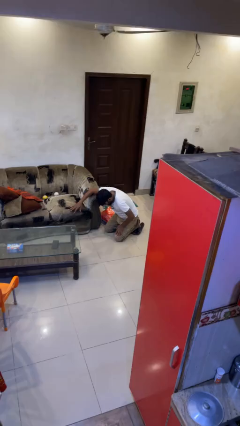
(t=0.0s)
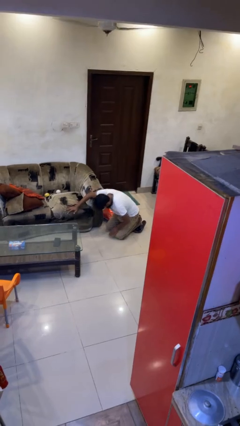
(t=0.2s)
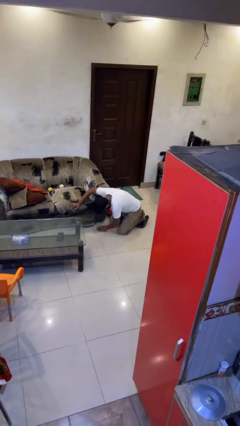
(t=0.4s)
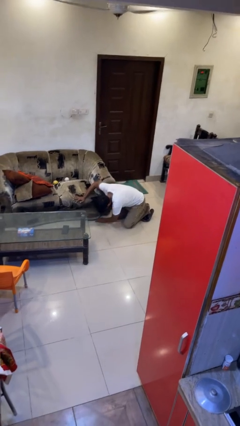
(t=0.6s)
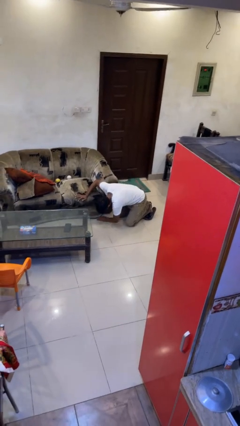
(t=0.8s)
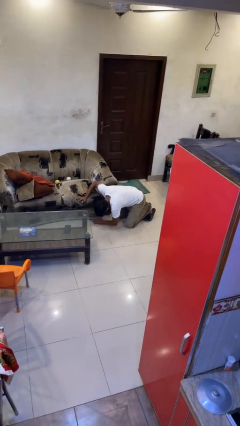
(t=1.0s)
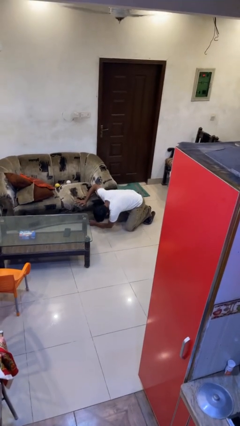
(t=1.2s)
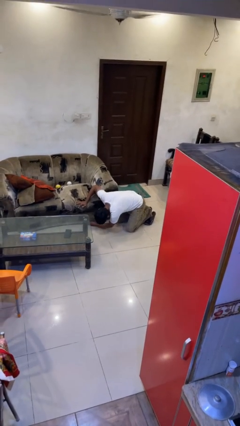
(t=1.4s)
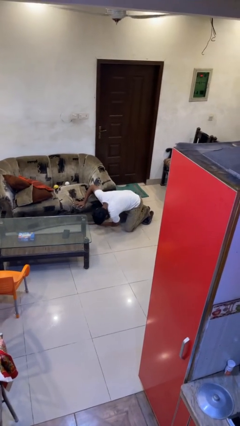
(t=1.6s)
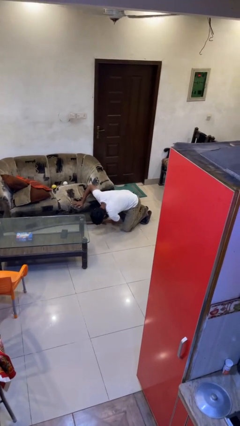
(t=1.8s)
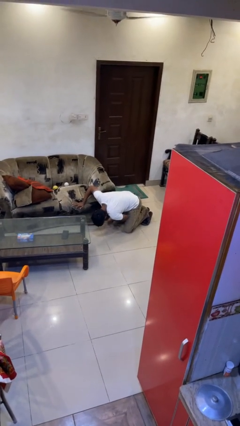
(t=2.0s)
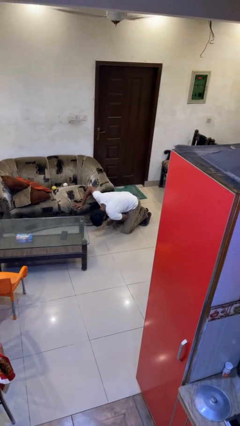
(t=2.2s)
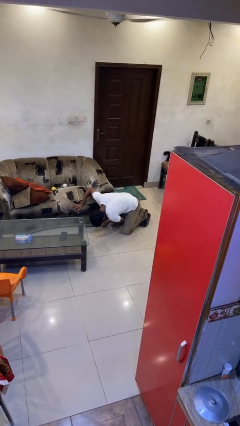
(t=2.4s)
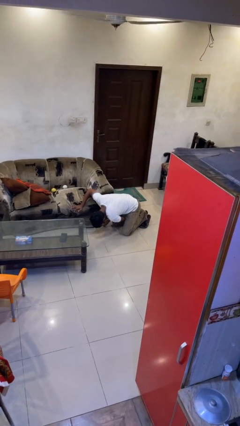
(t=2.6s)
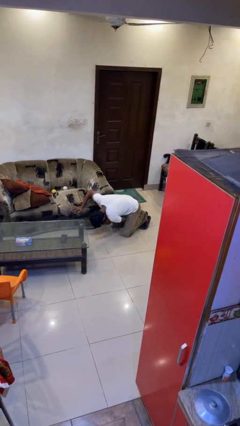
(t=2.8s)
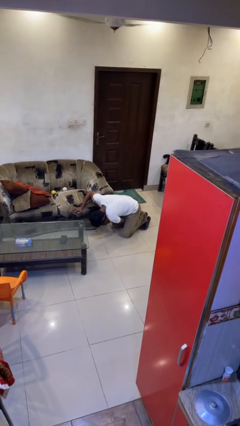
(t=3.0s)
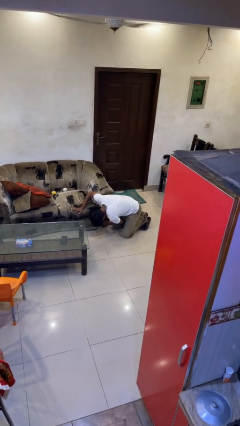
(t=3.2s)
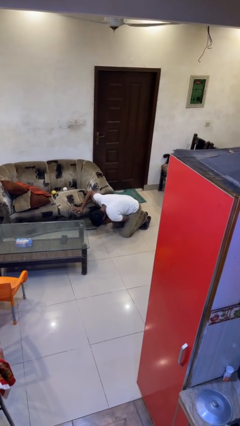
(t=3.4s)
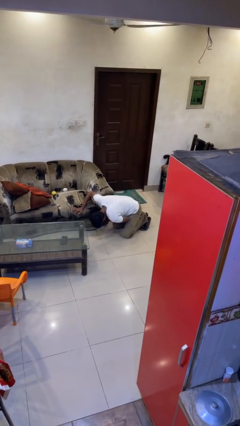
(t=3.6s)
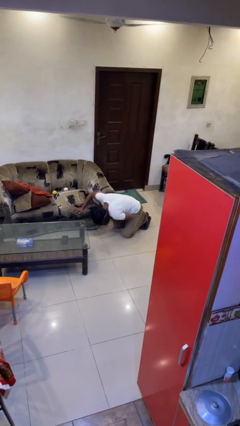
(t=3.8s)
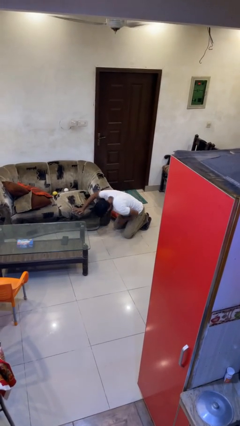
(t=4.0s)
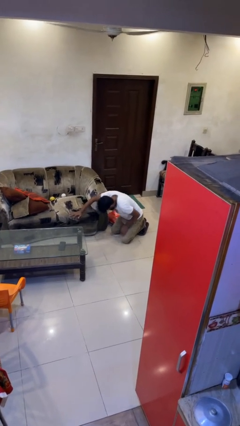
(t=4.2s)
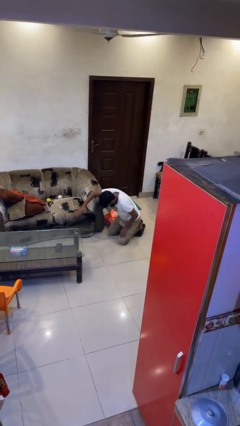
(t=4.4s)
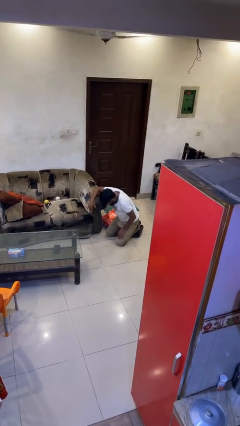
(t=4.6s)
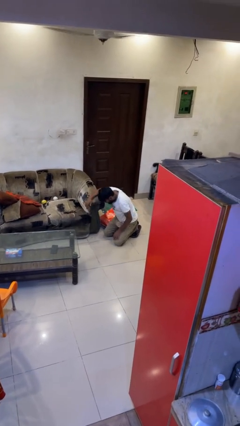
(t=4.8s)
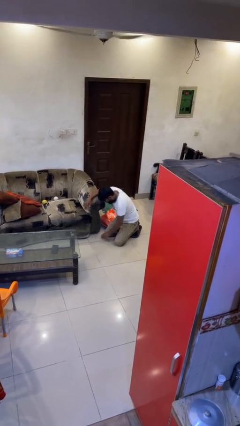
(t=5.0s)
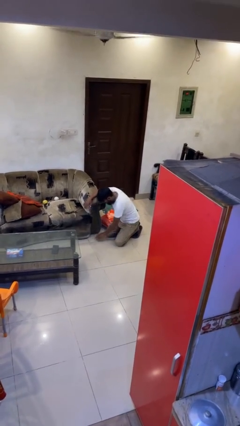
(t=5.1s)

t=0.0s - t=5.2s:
person searches under couch

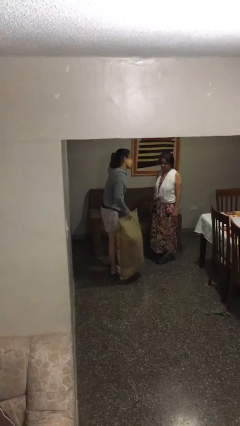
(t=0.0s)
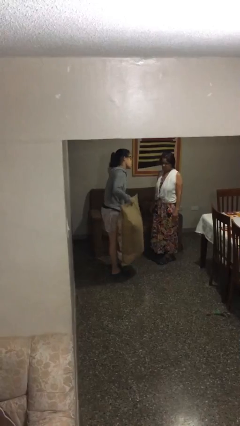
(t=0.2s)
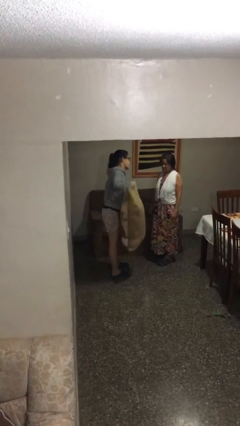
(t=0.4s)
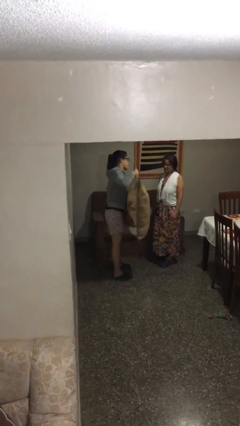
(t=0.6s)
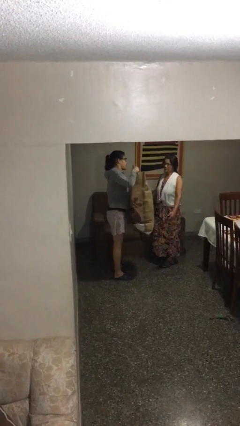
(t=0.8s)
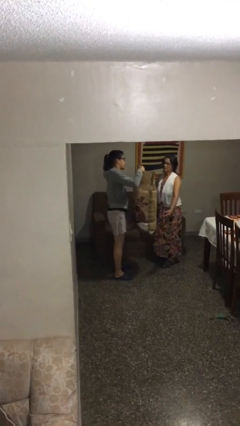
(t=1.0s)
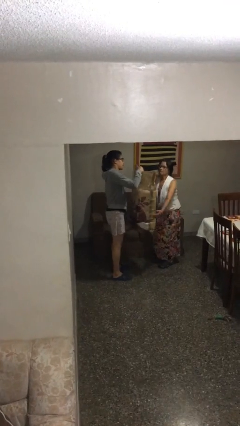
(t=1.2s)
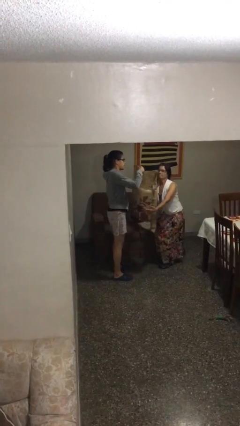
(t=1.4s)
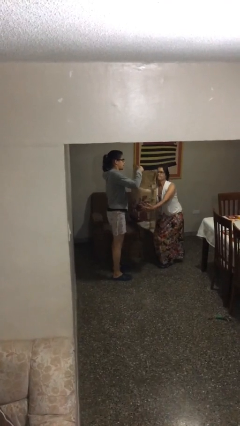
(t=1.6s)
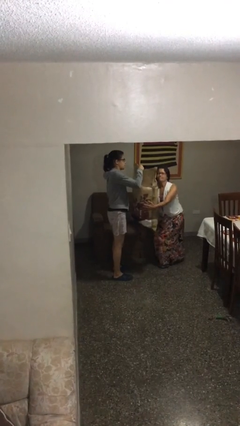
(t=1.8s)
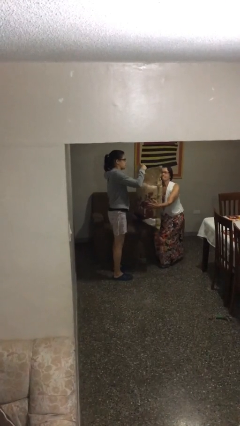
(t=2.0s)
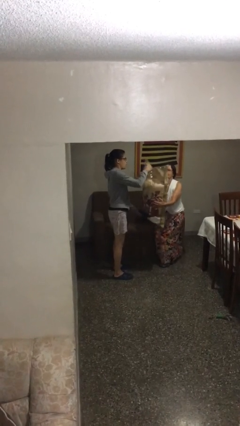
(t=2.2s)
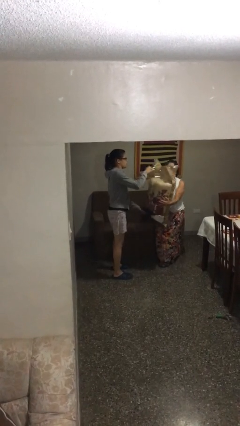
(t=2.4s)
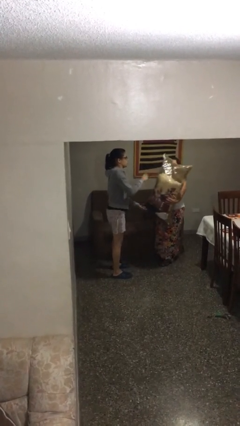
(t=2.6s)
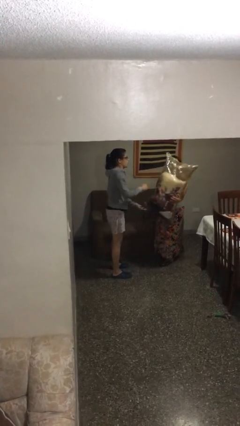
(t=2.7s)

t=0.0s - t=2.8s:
person transfers object to person

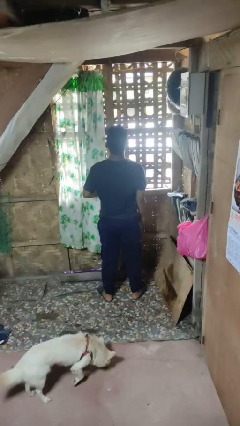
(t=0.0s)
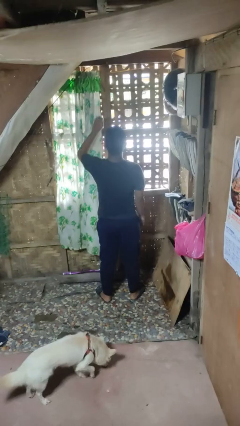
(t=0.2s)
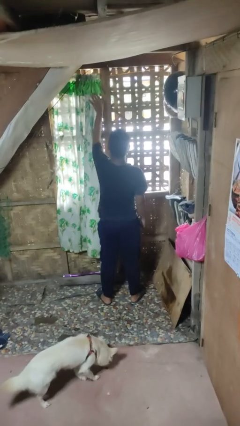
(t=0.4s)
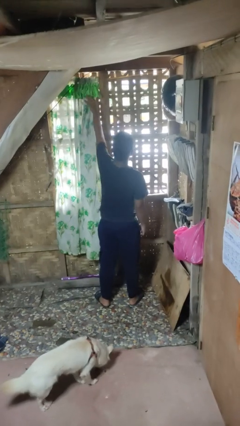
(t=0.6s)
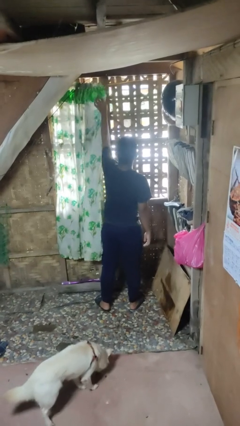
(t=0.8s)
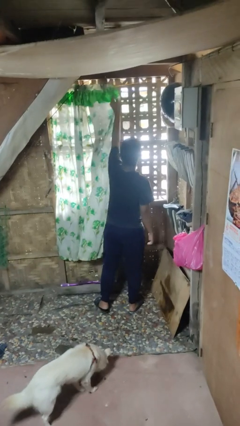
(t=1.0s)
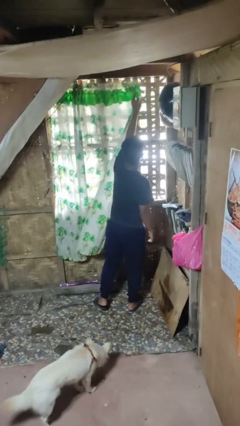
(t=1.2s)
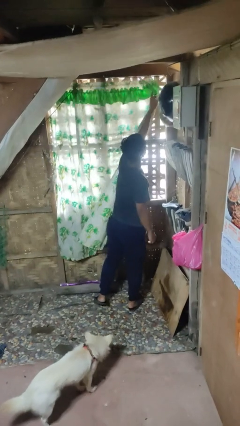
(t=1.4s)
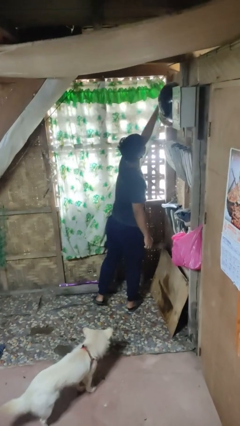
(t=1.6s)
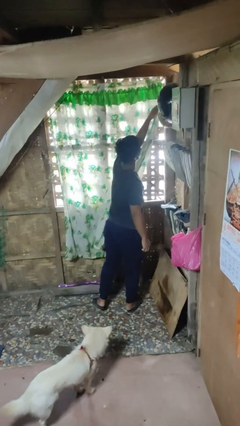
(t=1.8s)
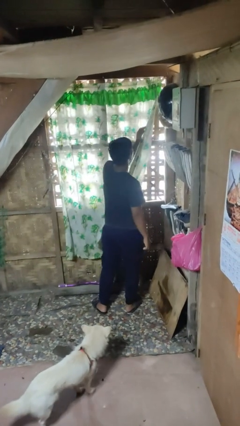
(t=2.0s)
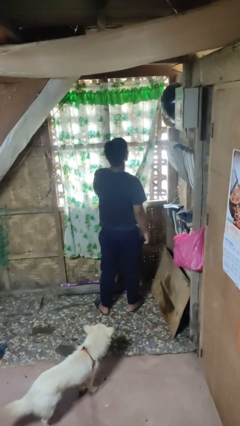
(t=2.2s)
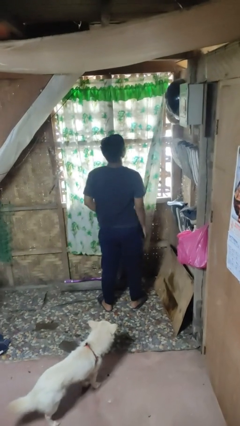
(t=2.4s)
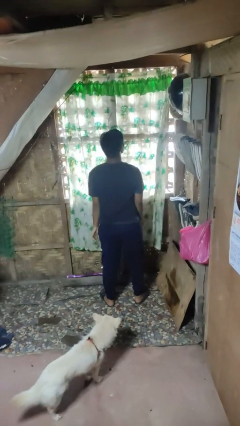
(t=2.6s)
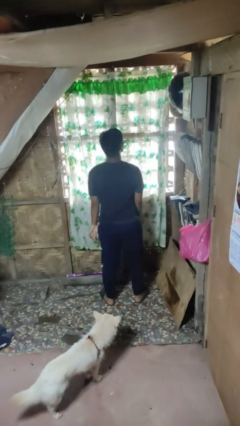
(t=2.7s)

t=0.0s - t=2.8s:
person closes curtains

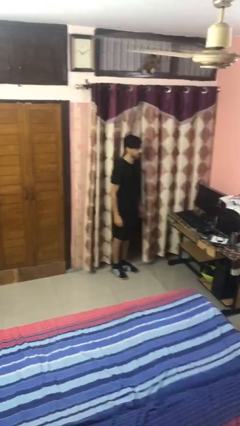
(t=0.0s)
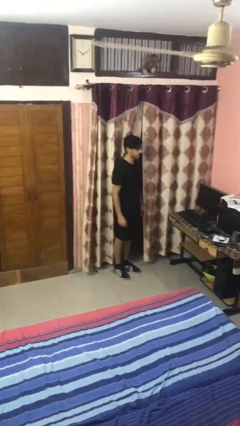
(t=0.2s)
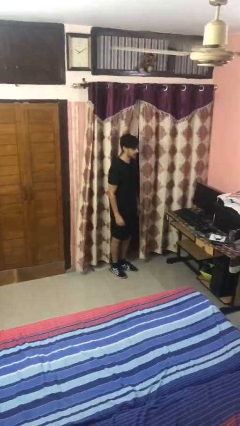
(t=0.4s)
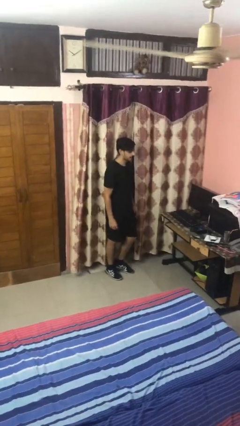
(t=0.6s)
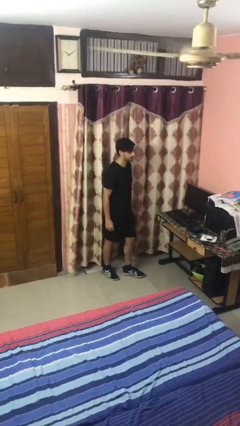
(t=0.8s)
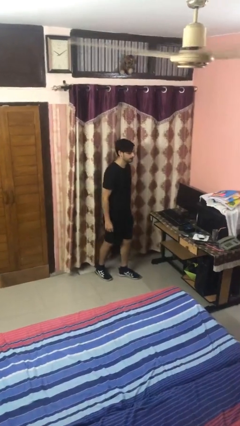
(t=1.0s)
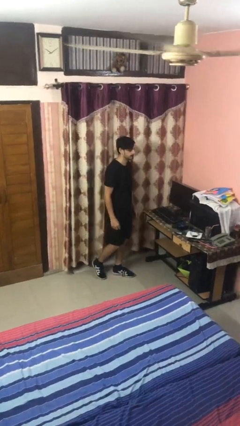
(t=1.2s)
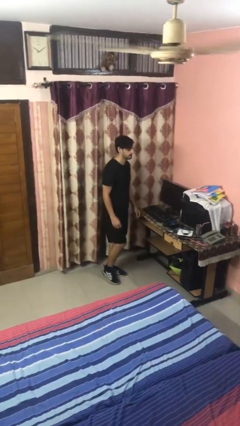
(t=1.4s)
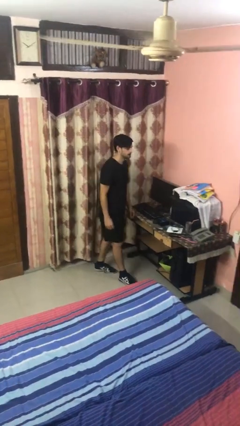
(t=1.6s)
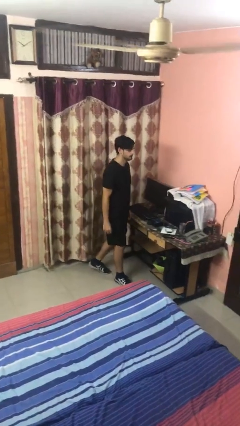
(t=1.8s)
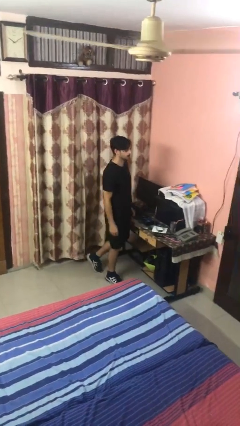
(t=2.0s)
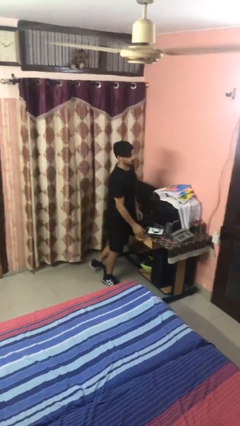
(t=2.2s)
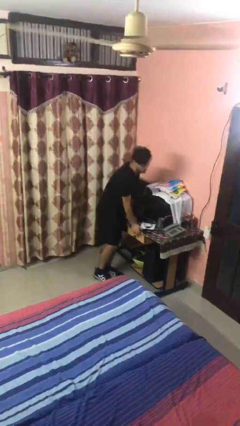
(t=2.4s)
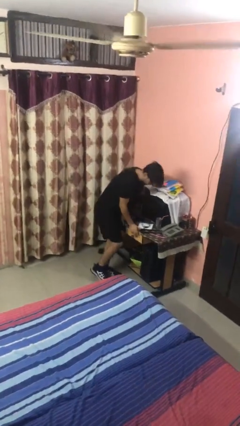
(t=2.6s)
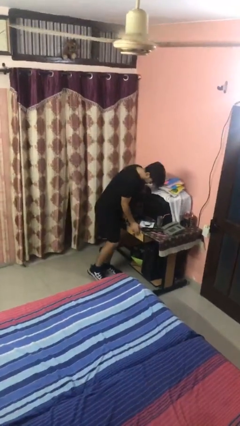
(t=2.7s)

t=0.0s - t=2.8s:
person bumps into table

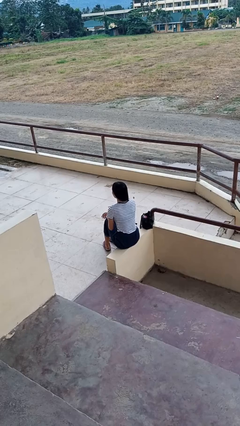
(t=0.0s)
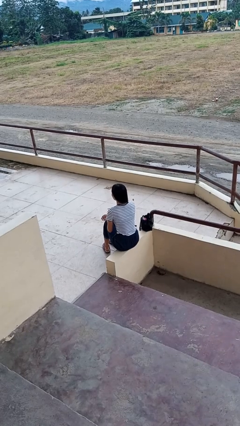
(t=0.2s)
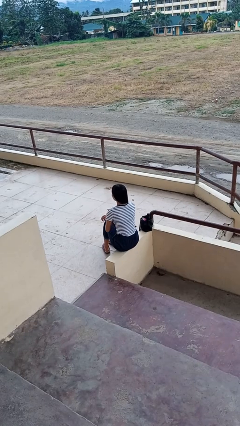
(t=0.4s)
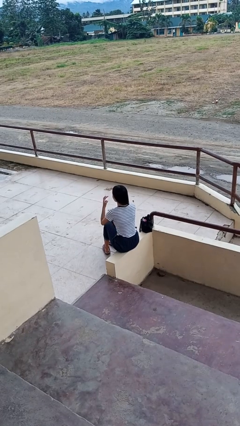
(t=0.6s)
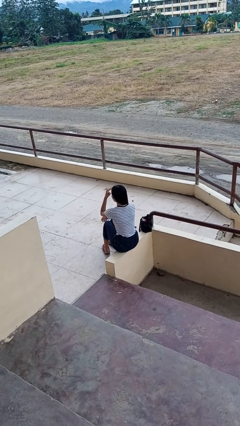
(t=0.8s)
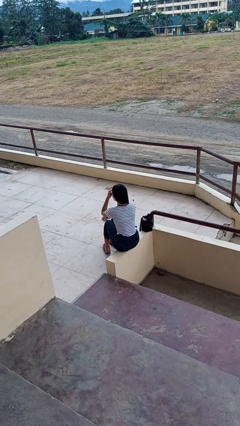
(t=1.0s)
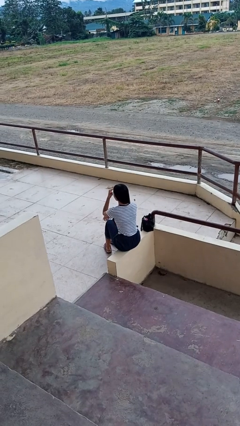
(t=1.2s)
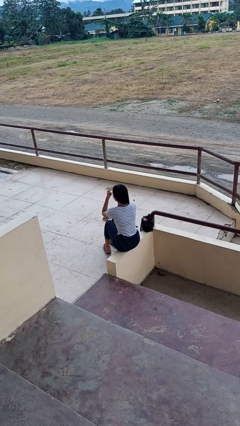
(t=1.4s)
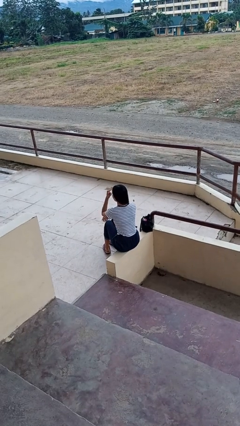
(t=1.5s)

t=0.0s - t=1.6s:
person gestures watch closely

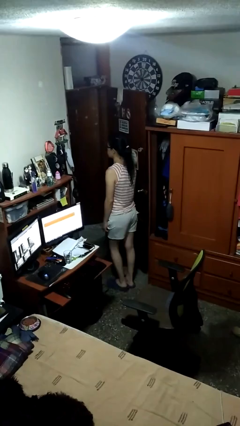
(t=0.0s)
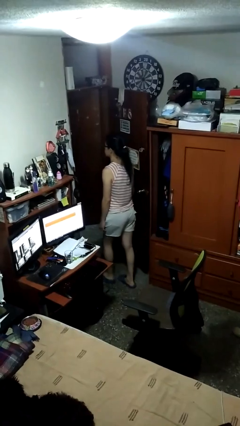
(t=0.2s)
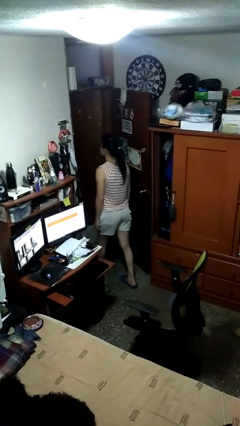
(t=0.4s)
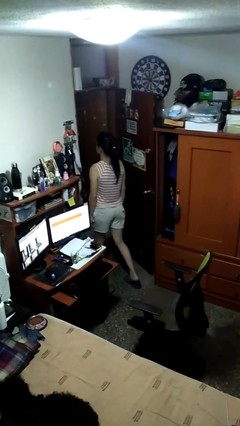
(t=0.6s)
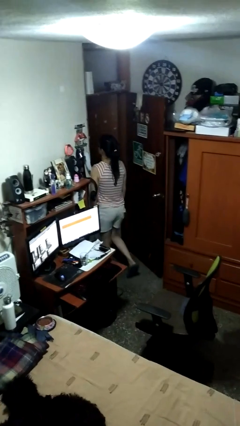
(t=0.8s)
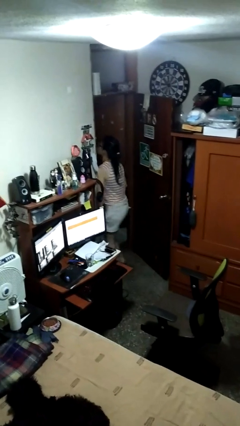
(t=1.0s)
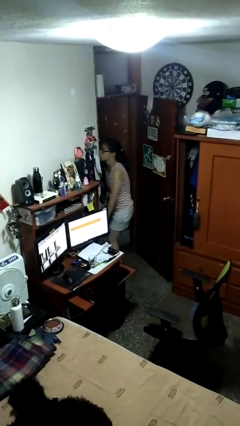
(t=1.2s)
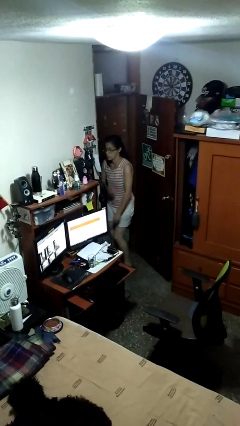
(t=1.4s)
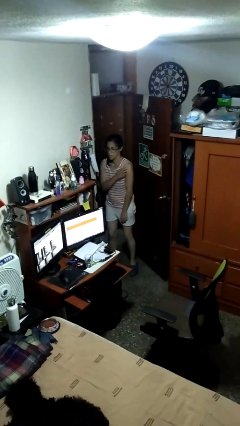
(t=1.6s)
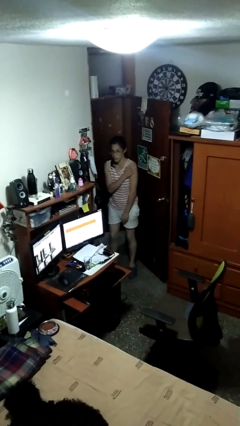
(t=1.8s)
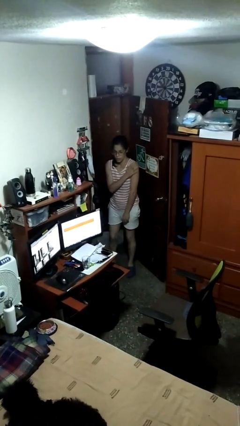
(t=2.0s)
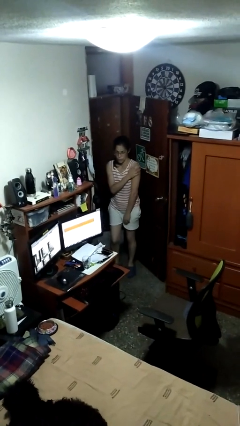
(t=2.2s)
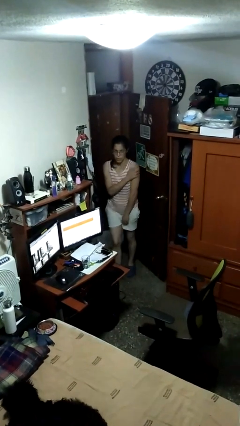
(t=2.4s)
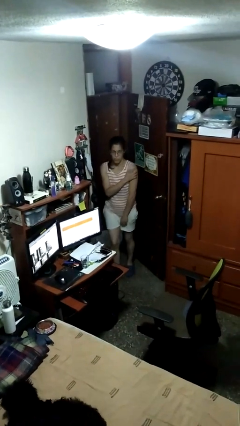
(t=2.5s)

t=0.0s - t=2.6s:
person bumps into wall
